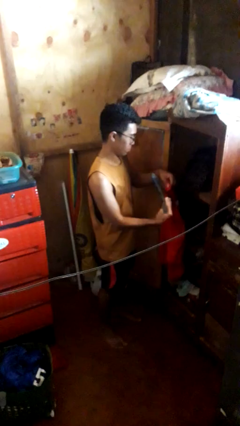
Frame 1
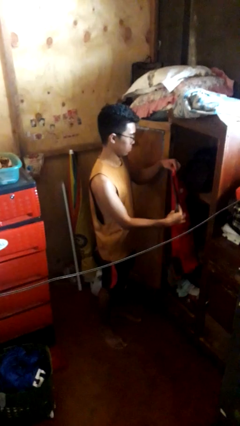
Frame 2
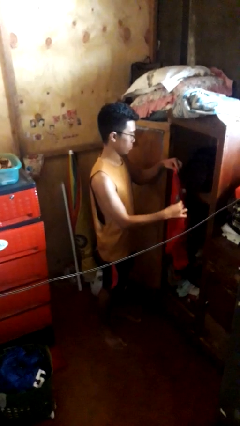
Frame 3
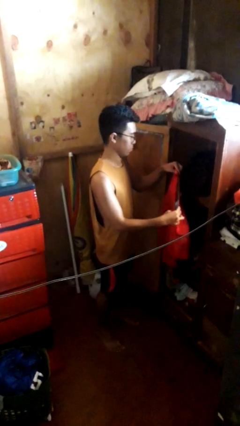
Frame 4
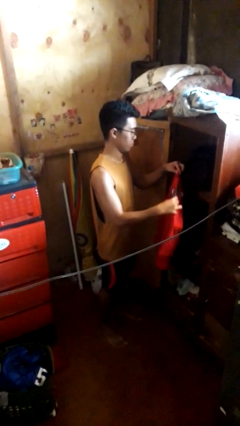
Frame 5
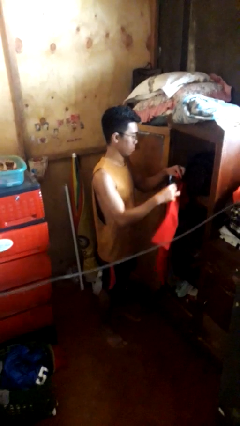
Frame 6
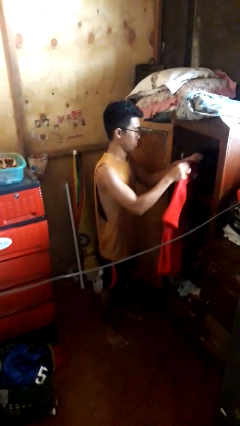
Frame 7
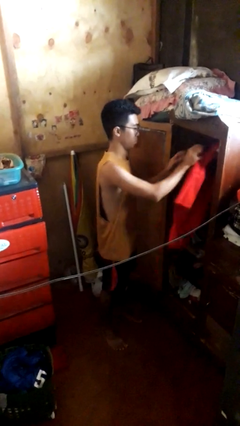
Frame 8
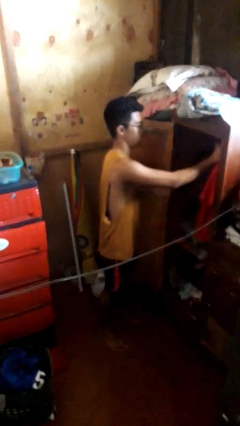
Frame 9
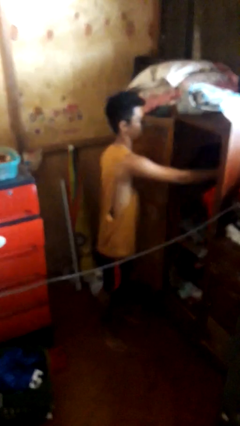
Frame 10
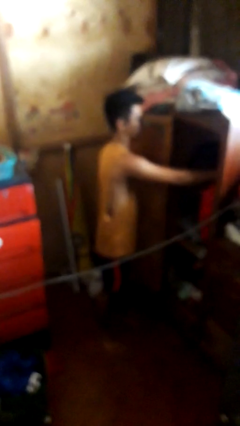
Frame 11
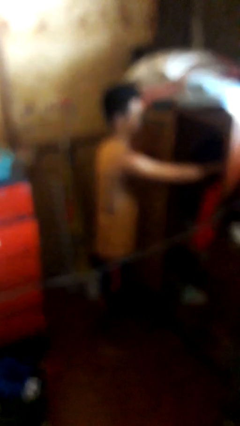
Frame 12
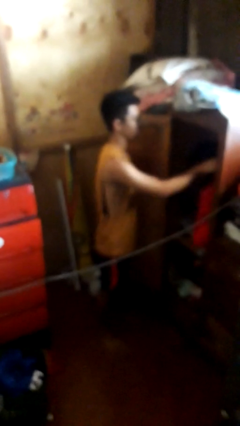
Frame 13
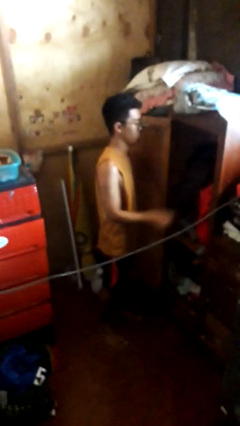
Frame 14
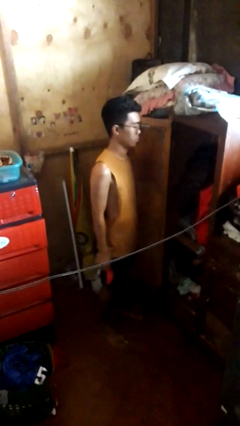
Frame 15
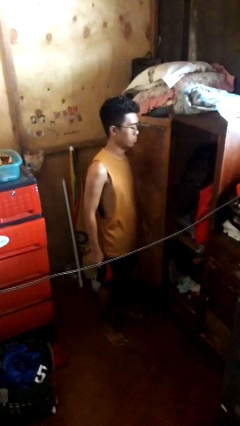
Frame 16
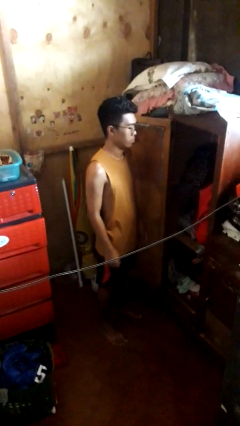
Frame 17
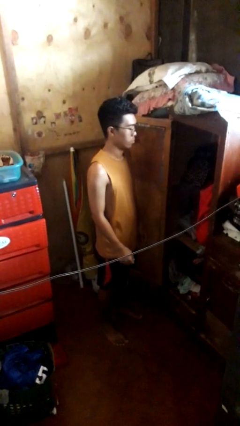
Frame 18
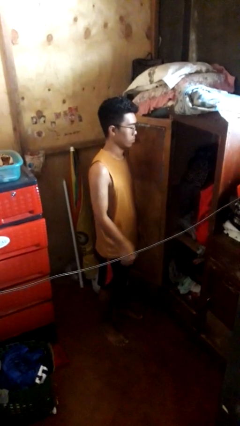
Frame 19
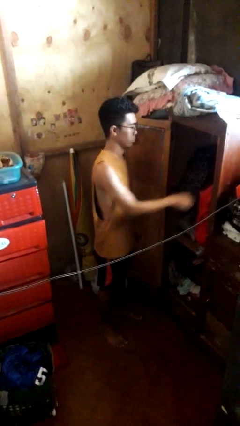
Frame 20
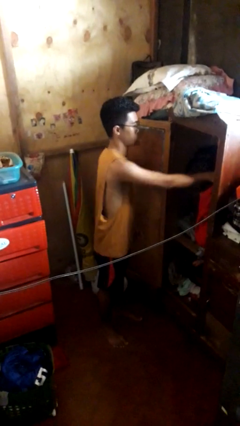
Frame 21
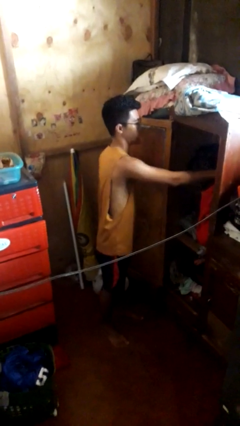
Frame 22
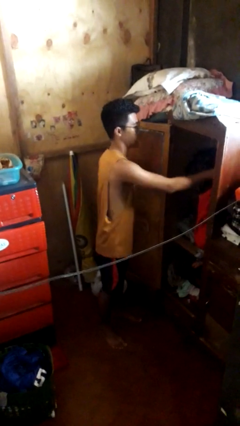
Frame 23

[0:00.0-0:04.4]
person puts clothes into closet

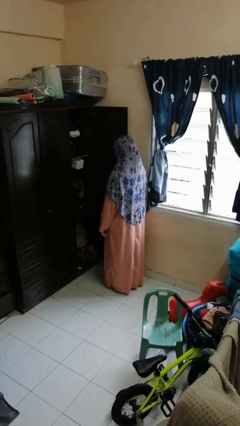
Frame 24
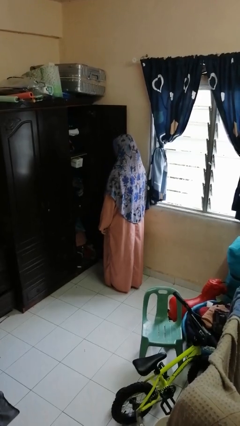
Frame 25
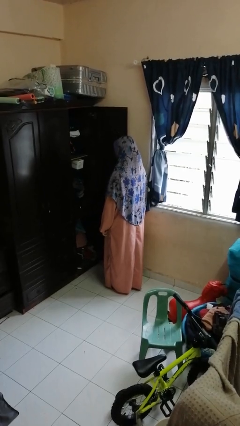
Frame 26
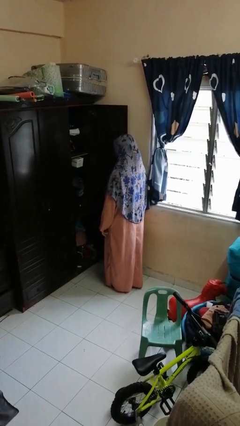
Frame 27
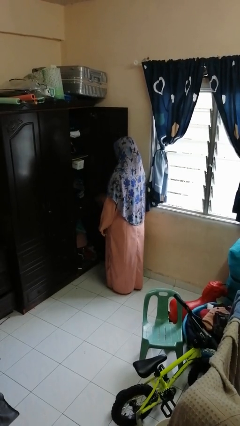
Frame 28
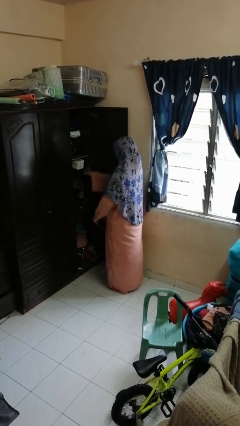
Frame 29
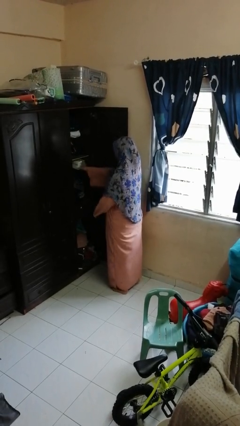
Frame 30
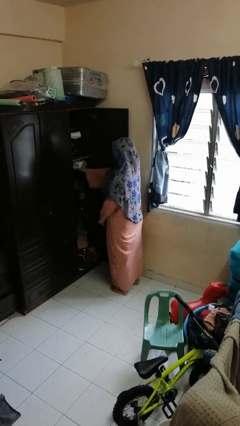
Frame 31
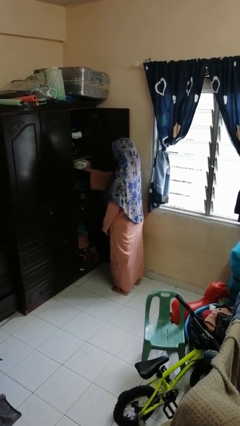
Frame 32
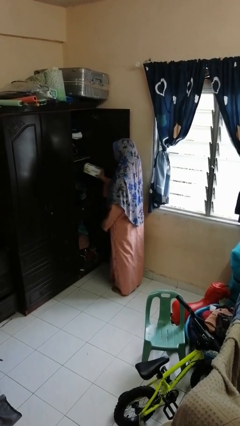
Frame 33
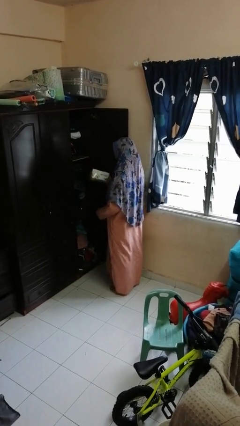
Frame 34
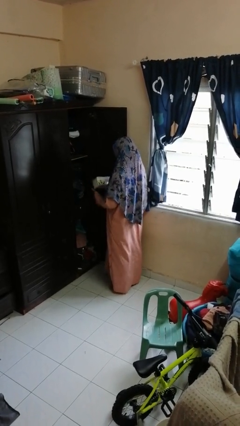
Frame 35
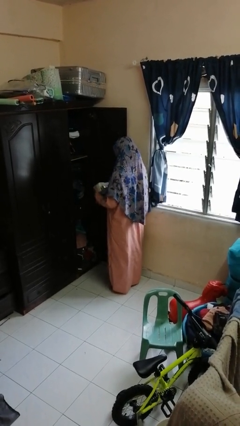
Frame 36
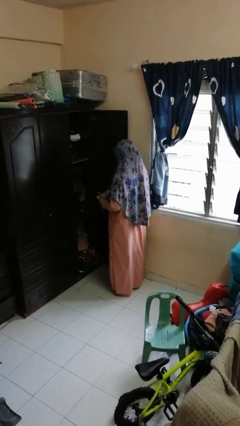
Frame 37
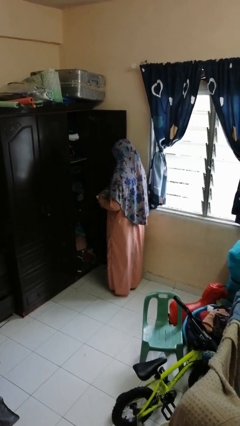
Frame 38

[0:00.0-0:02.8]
person picks up object from cabinet

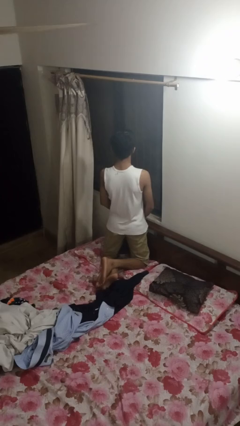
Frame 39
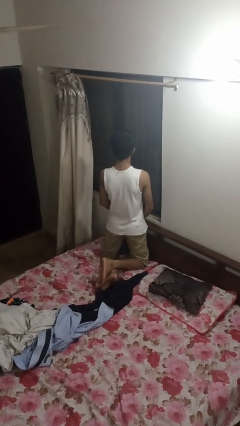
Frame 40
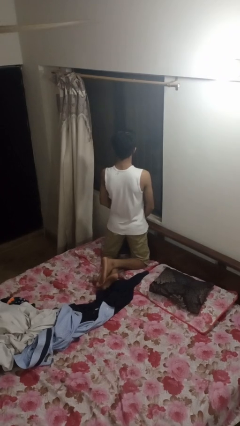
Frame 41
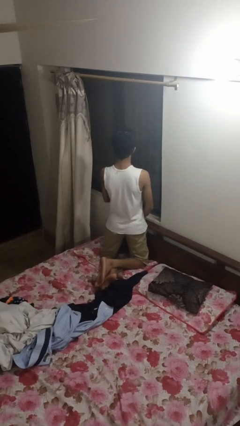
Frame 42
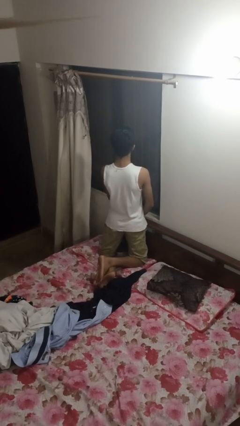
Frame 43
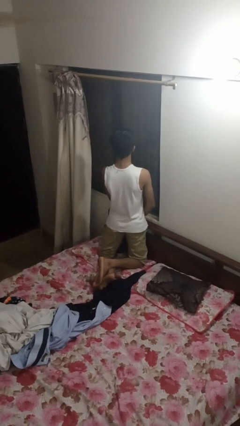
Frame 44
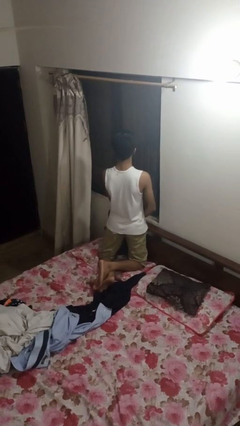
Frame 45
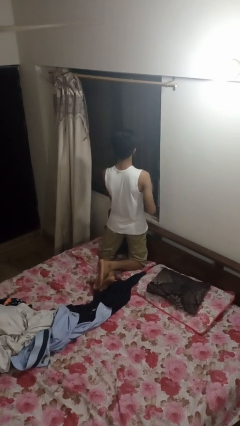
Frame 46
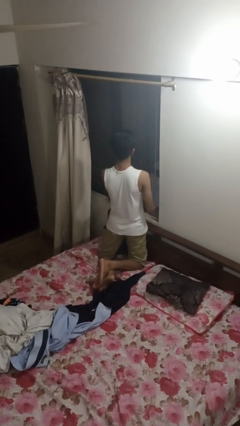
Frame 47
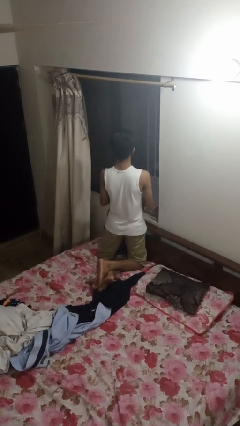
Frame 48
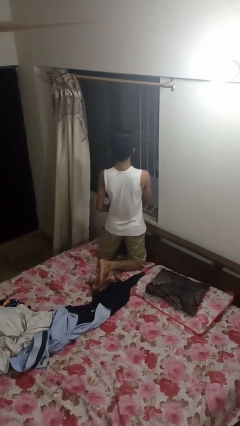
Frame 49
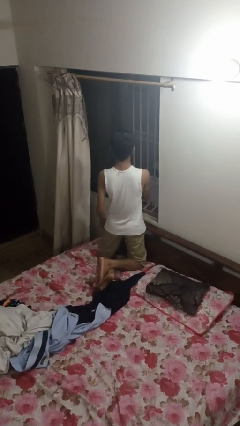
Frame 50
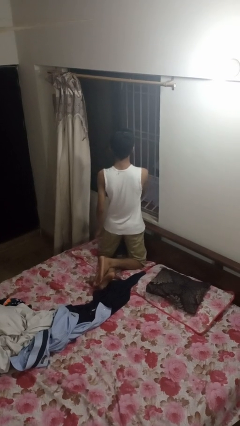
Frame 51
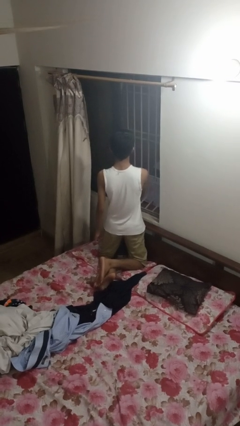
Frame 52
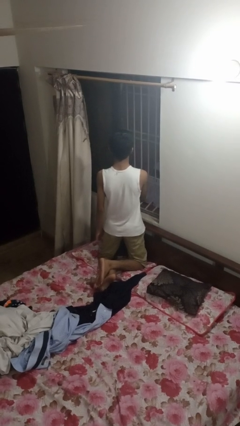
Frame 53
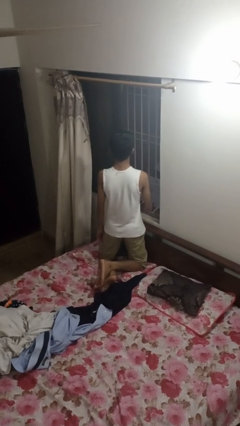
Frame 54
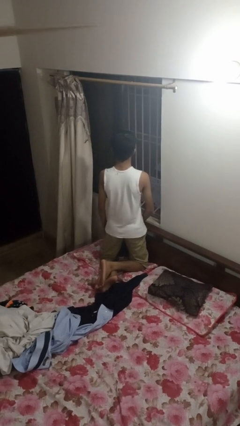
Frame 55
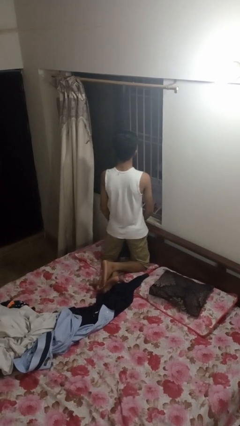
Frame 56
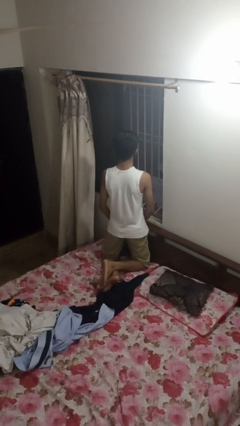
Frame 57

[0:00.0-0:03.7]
person opens home window

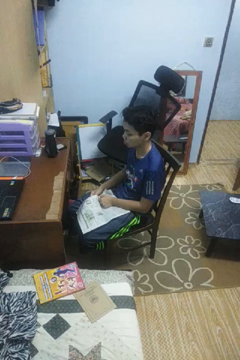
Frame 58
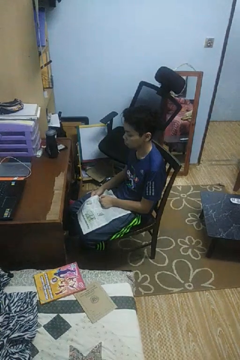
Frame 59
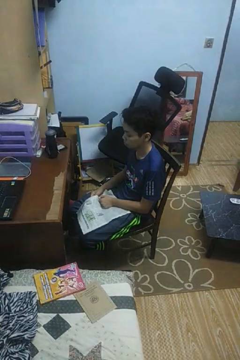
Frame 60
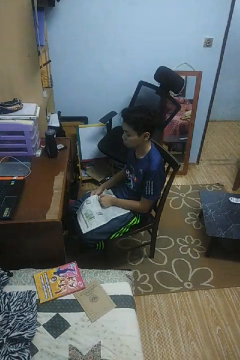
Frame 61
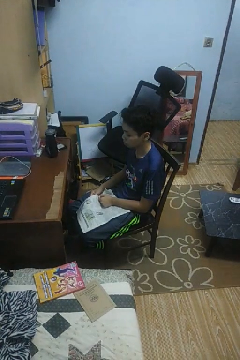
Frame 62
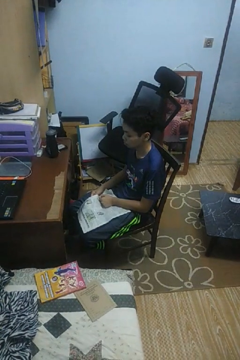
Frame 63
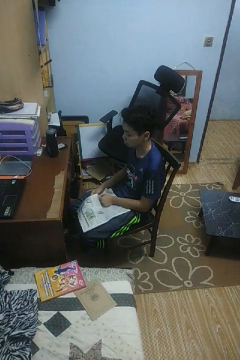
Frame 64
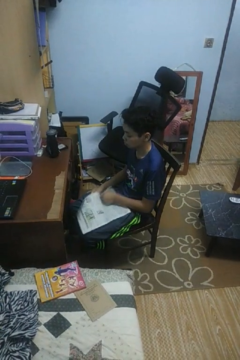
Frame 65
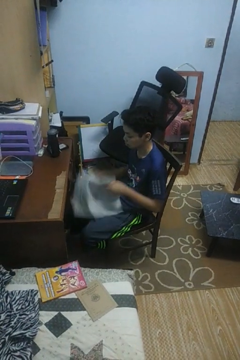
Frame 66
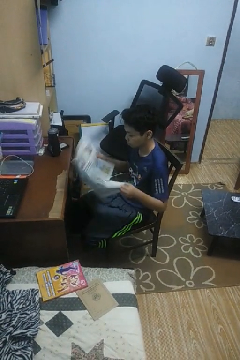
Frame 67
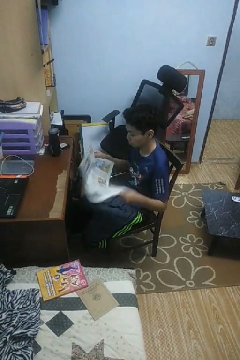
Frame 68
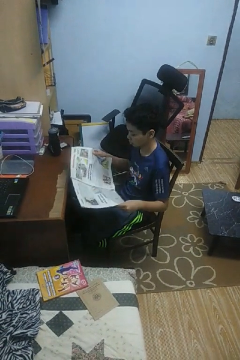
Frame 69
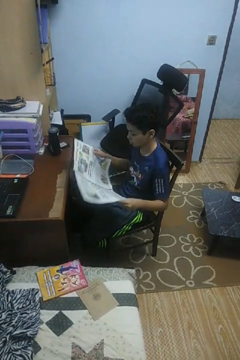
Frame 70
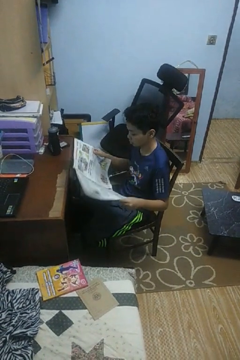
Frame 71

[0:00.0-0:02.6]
person reads newspaper

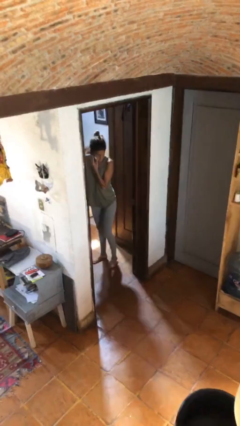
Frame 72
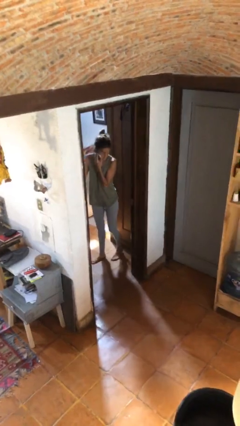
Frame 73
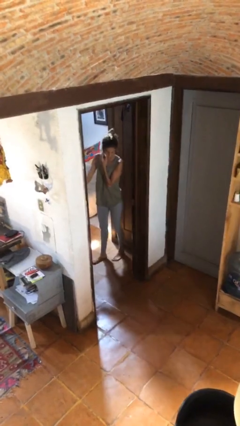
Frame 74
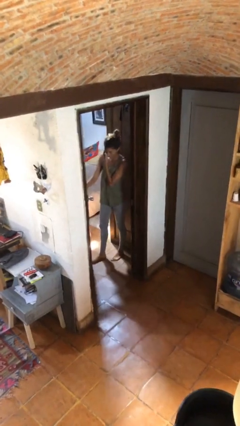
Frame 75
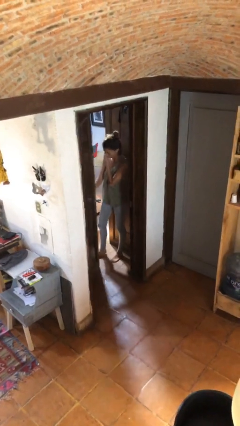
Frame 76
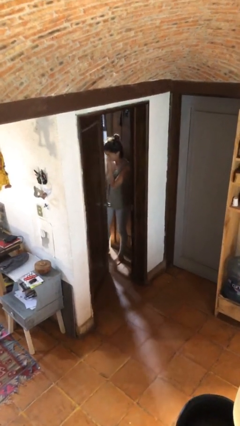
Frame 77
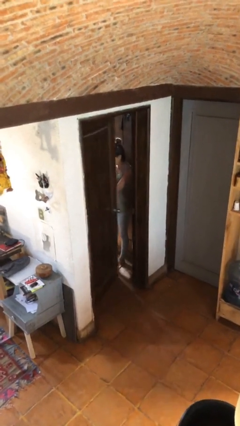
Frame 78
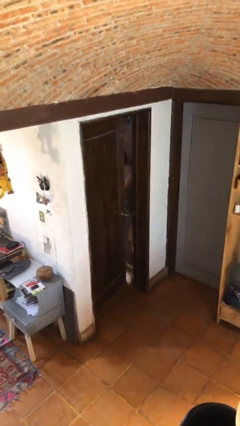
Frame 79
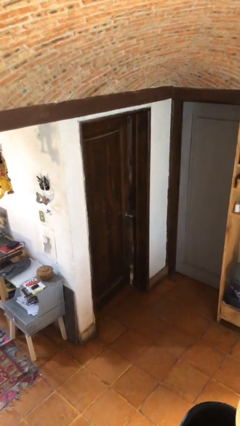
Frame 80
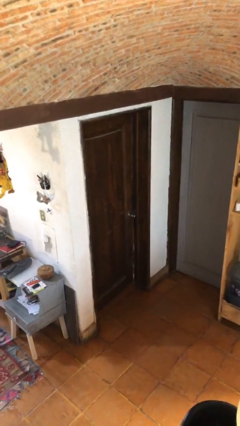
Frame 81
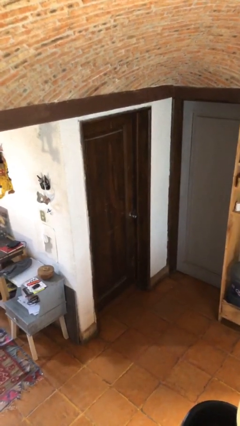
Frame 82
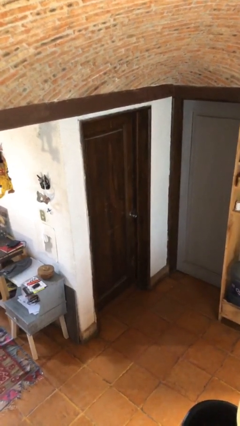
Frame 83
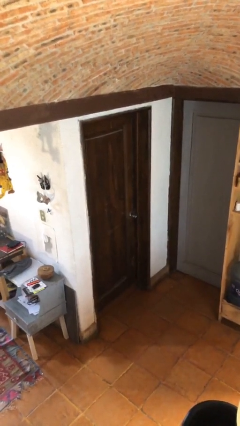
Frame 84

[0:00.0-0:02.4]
person closes facility door

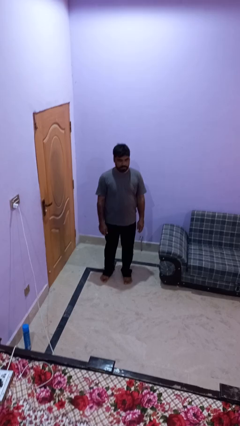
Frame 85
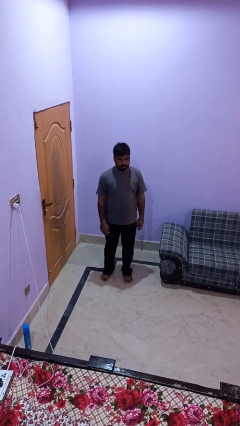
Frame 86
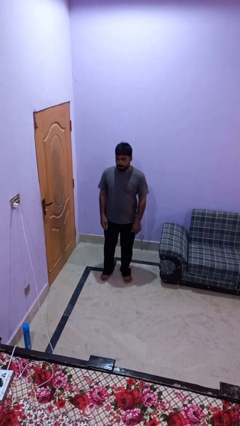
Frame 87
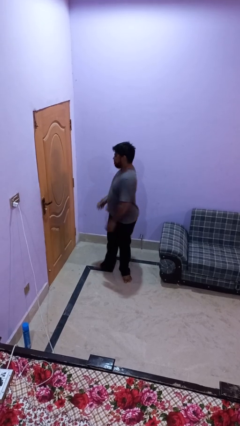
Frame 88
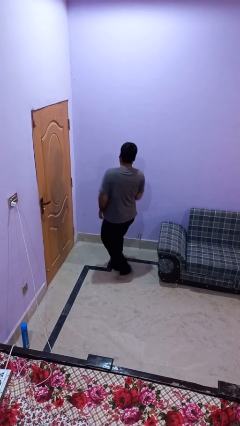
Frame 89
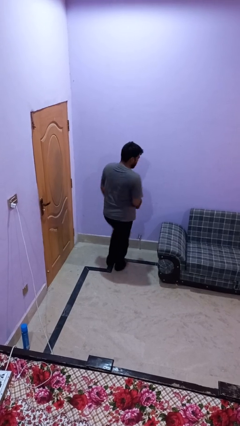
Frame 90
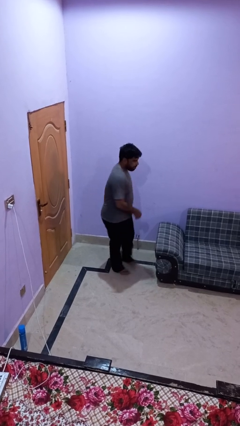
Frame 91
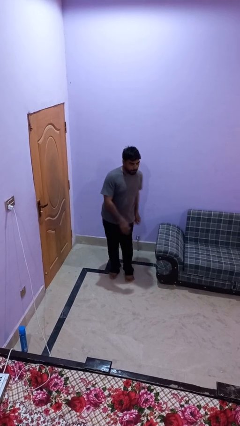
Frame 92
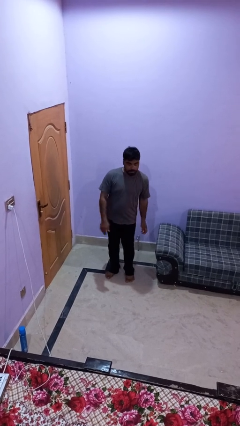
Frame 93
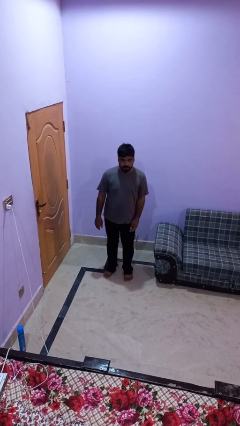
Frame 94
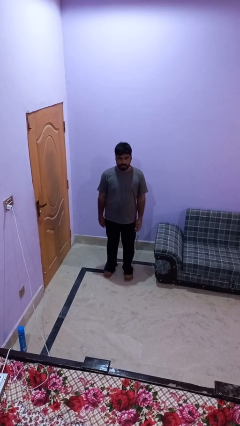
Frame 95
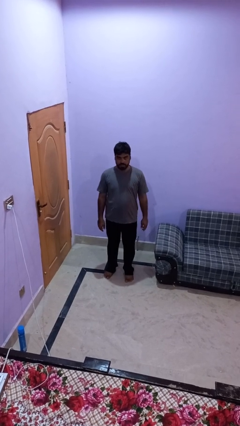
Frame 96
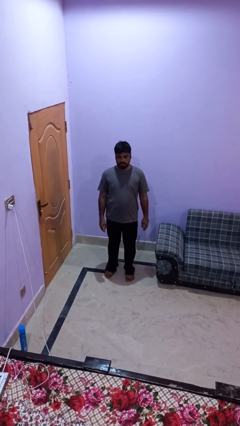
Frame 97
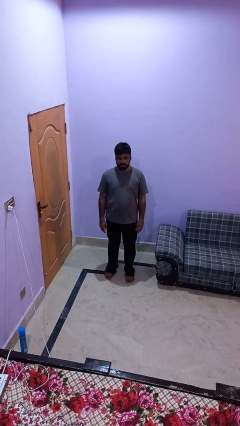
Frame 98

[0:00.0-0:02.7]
person twirls
